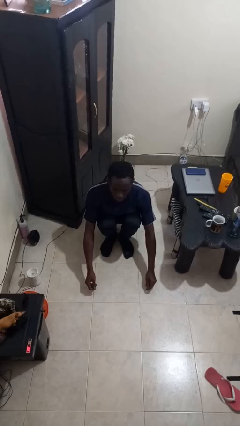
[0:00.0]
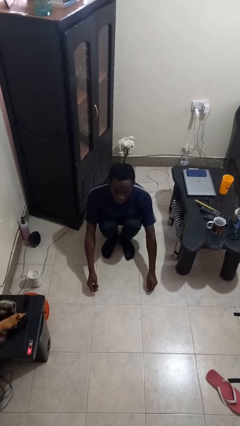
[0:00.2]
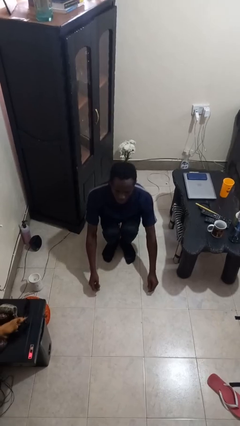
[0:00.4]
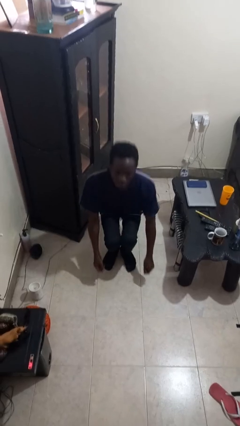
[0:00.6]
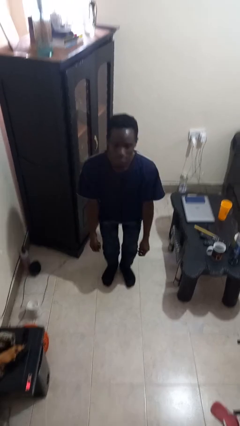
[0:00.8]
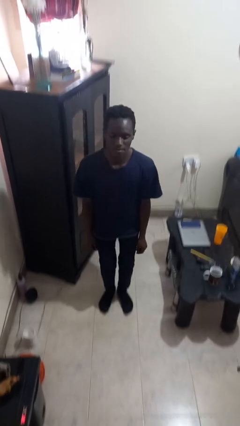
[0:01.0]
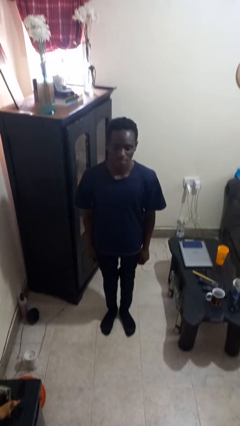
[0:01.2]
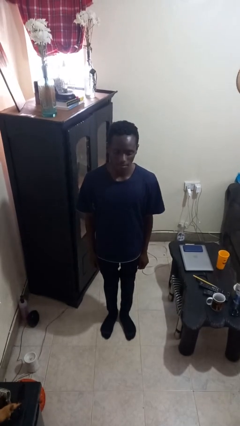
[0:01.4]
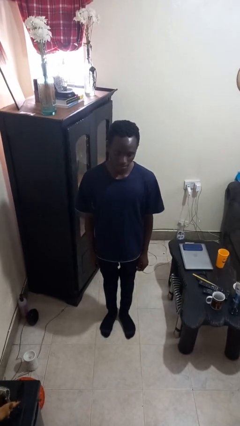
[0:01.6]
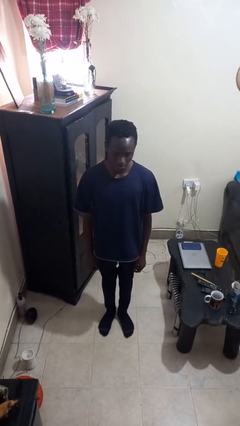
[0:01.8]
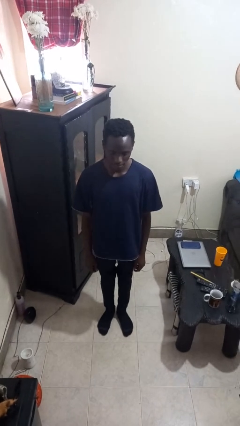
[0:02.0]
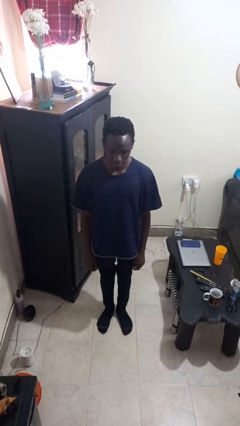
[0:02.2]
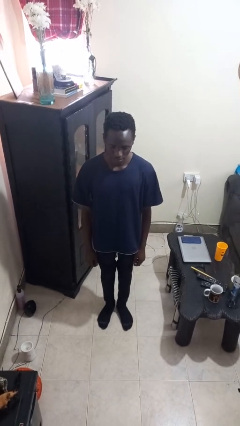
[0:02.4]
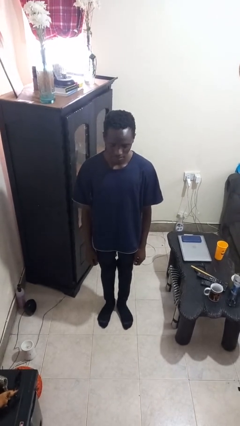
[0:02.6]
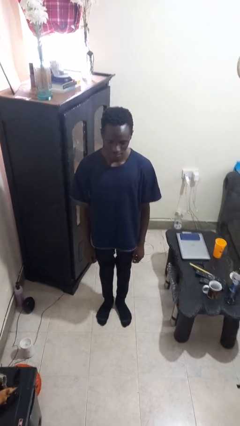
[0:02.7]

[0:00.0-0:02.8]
person stands up

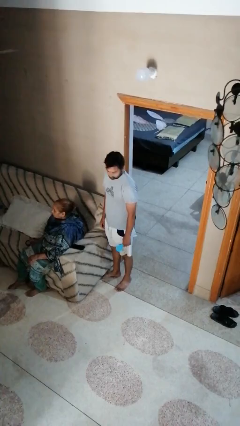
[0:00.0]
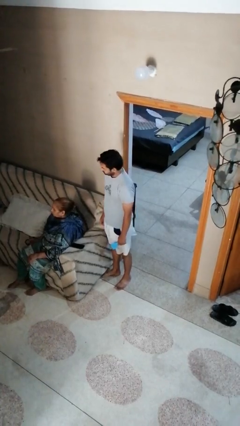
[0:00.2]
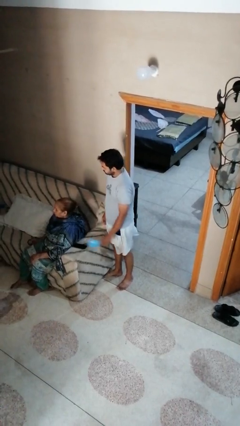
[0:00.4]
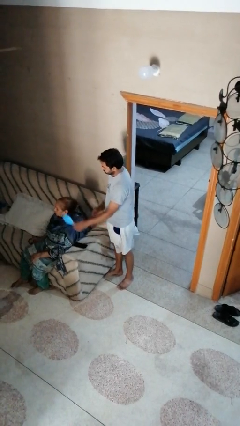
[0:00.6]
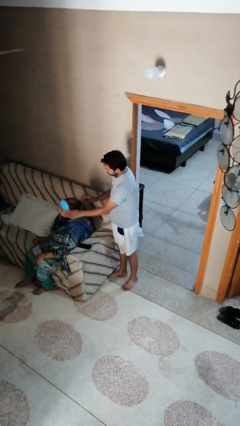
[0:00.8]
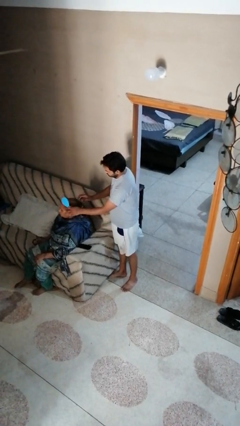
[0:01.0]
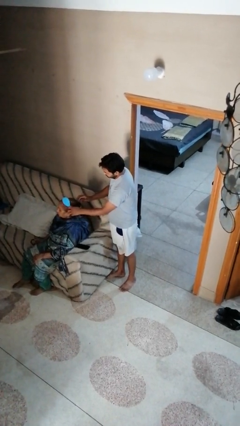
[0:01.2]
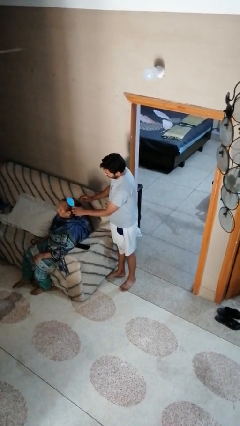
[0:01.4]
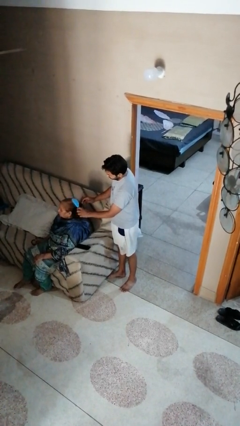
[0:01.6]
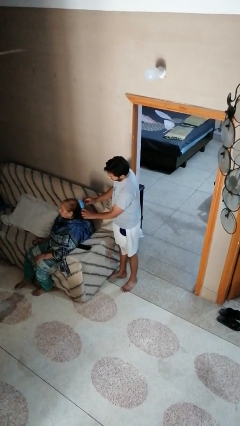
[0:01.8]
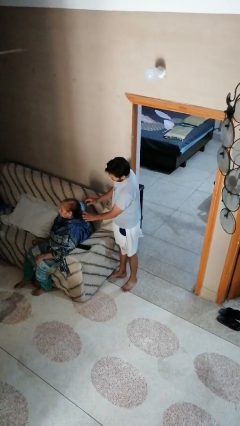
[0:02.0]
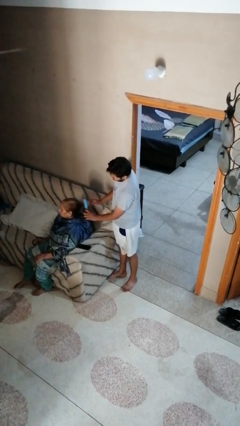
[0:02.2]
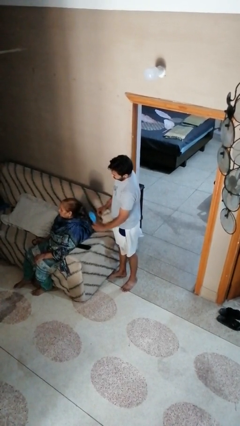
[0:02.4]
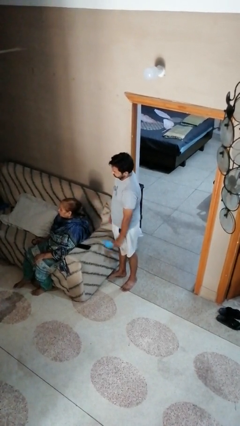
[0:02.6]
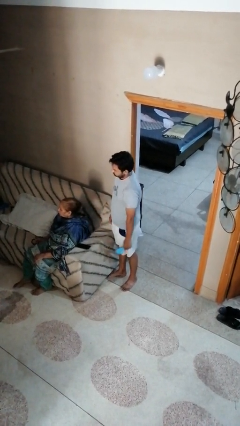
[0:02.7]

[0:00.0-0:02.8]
person brushes hair of person

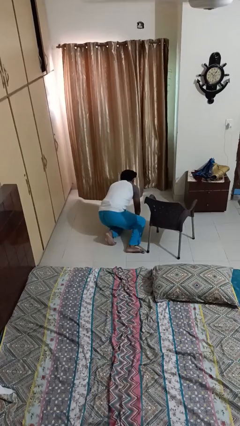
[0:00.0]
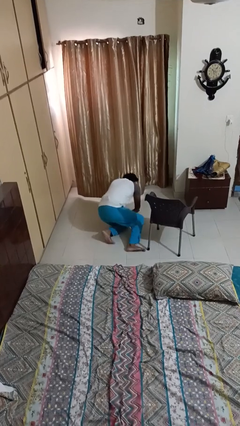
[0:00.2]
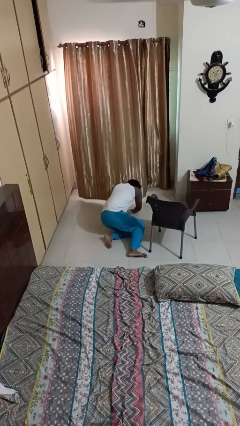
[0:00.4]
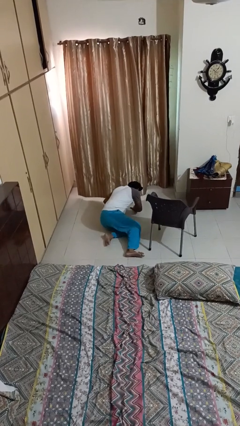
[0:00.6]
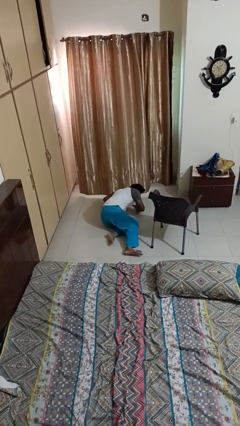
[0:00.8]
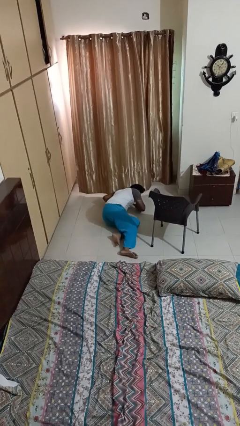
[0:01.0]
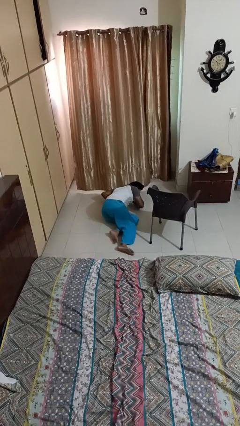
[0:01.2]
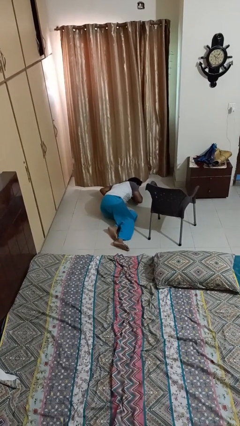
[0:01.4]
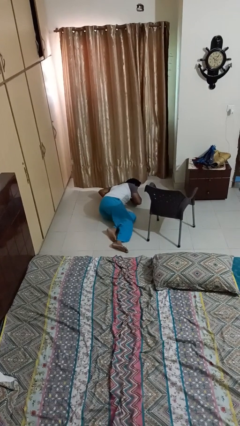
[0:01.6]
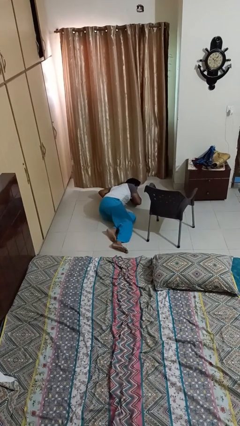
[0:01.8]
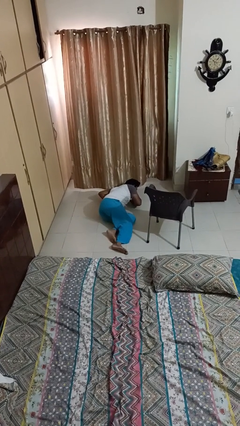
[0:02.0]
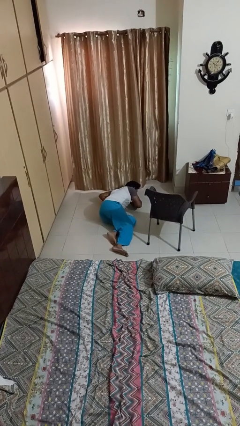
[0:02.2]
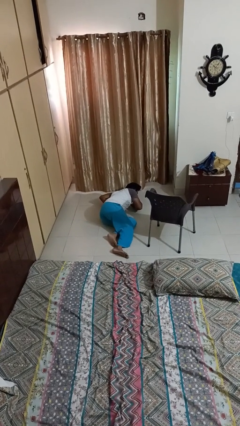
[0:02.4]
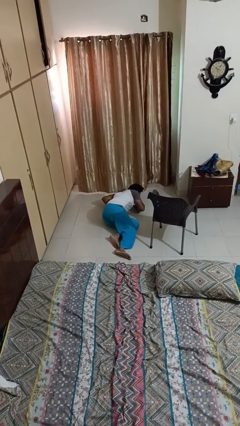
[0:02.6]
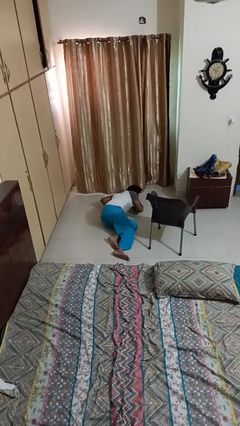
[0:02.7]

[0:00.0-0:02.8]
person lies down on floor

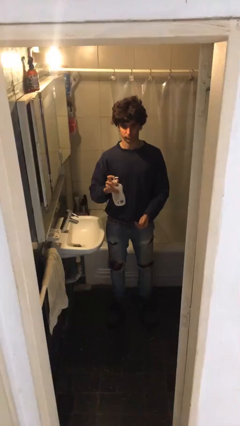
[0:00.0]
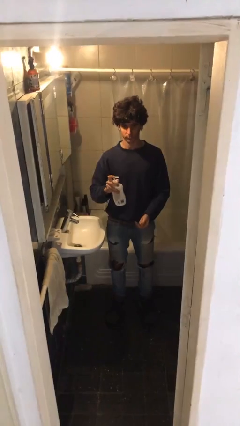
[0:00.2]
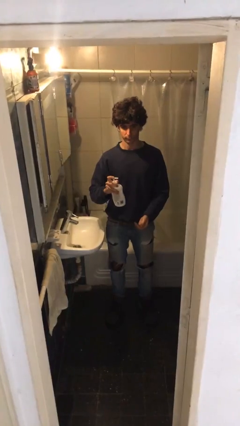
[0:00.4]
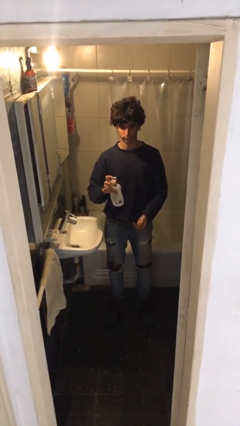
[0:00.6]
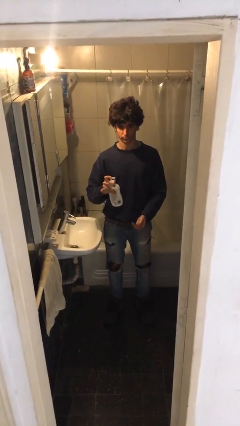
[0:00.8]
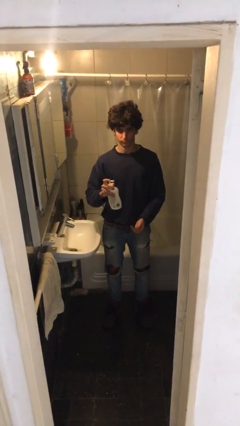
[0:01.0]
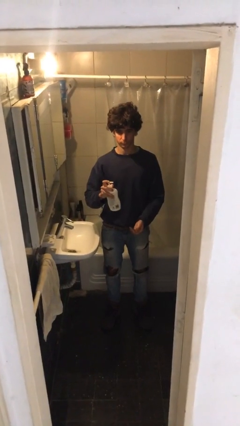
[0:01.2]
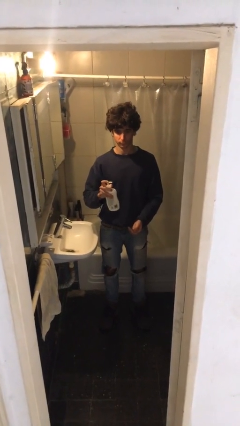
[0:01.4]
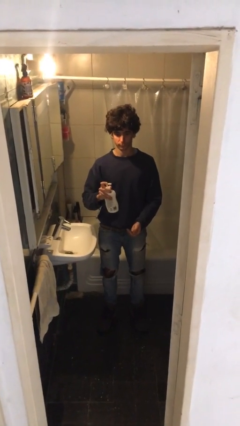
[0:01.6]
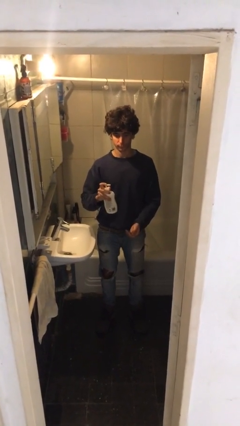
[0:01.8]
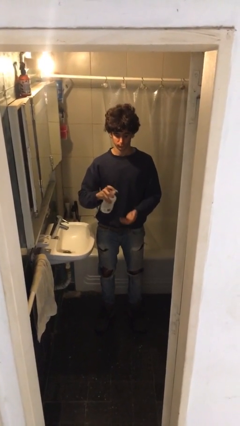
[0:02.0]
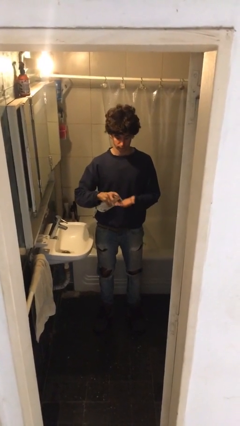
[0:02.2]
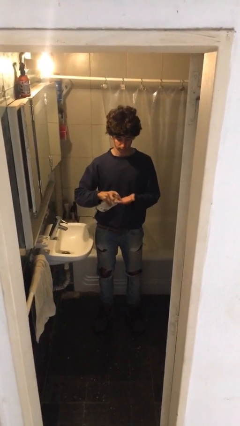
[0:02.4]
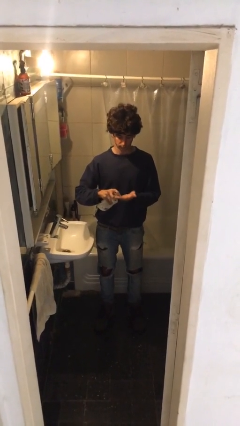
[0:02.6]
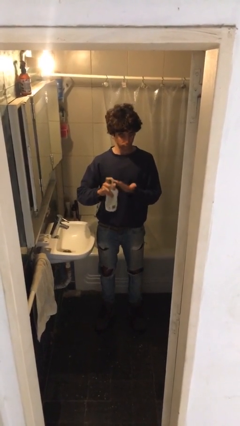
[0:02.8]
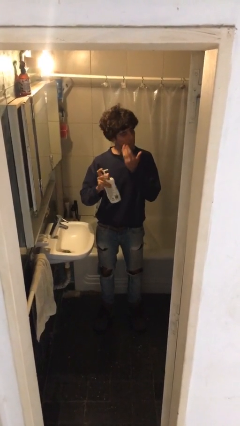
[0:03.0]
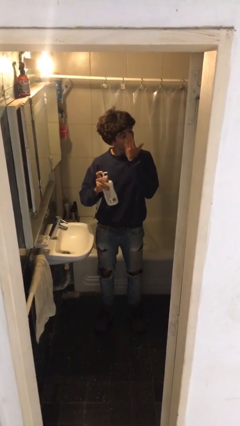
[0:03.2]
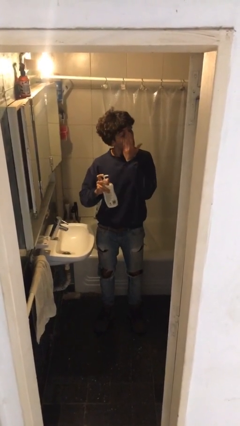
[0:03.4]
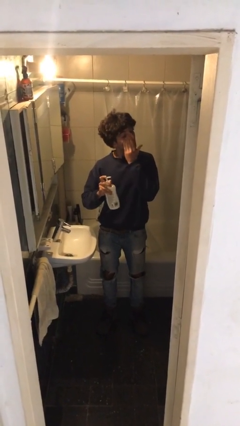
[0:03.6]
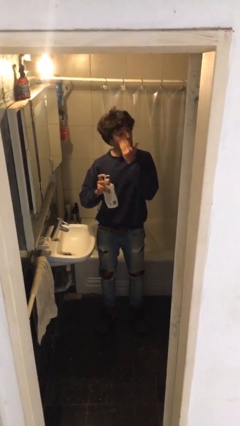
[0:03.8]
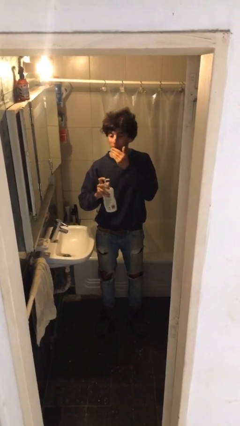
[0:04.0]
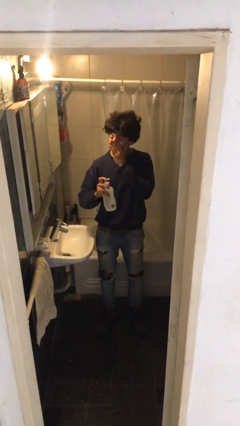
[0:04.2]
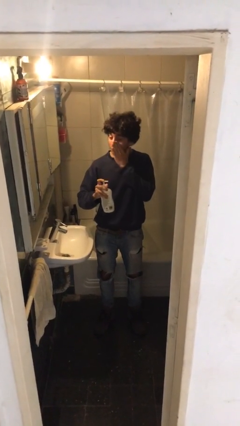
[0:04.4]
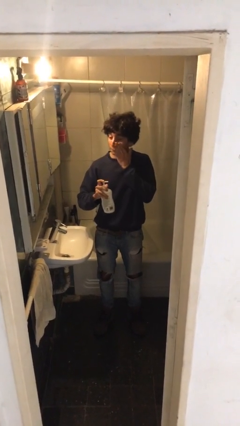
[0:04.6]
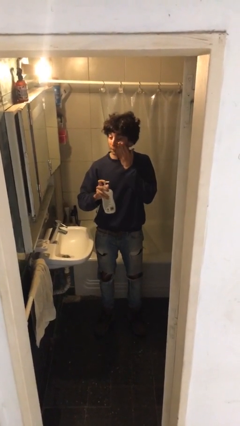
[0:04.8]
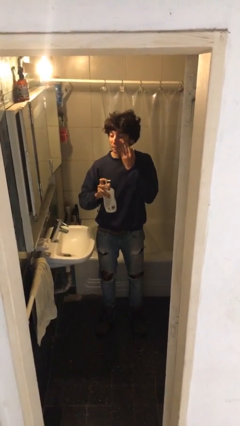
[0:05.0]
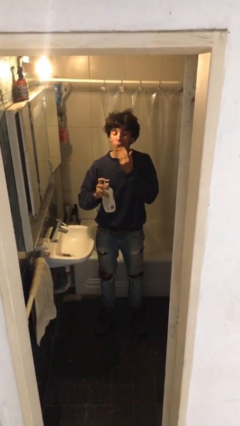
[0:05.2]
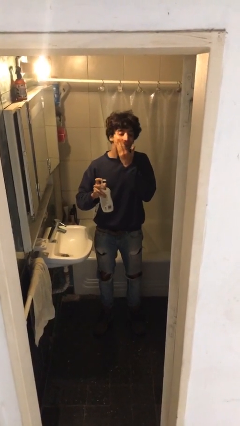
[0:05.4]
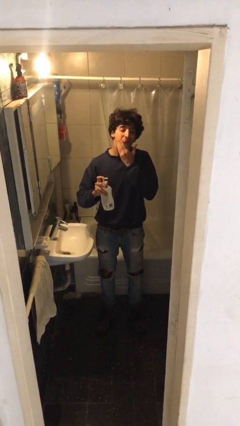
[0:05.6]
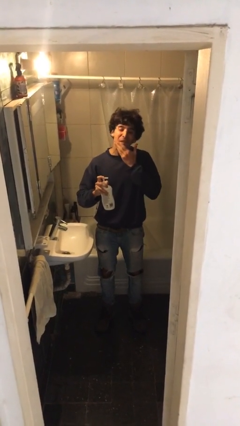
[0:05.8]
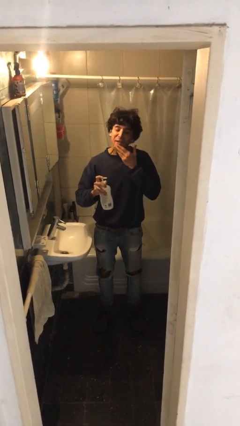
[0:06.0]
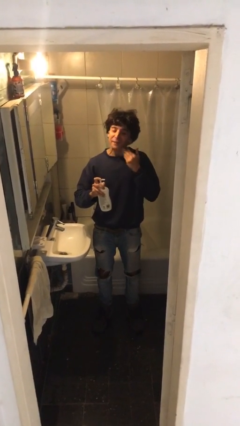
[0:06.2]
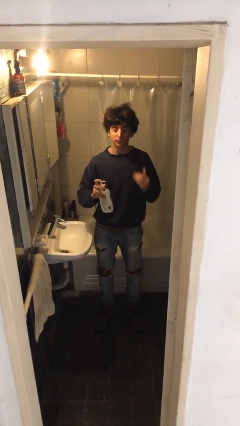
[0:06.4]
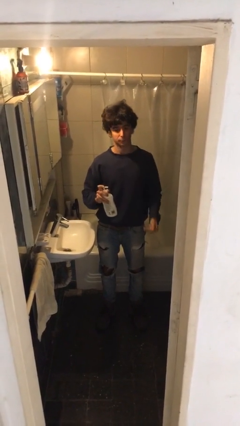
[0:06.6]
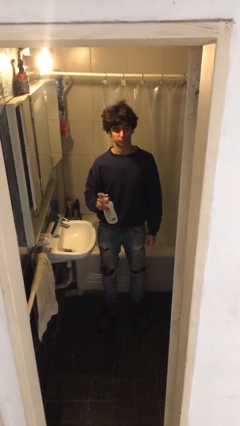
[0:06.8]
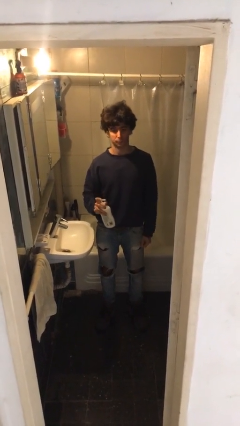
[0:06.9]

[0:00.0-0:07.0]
person applies facial moisturizer

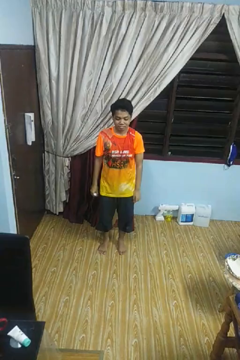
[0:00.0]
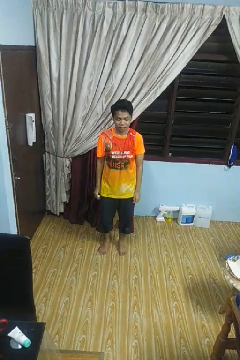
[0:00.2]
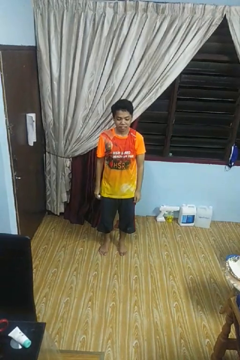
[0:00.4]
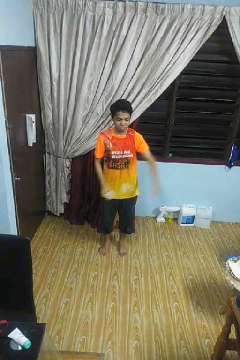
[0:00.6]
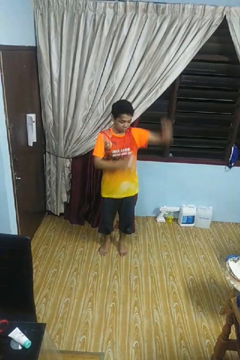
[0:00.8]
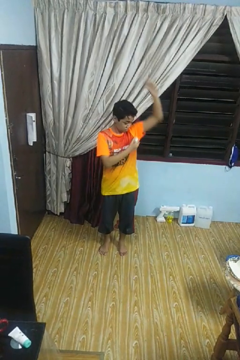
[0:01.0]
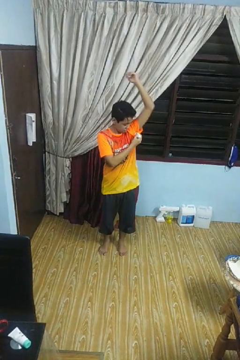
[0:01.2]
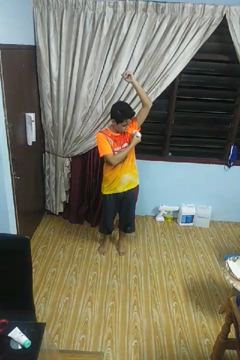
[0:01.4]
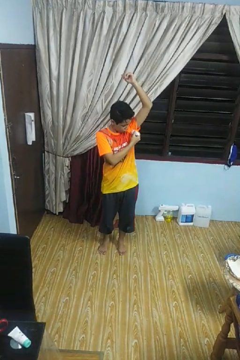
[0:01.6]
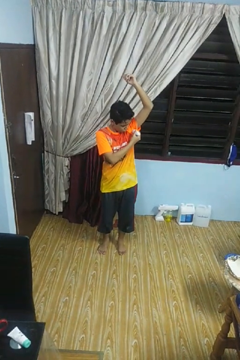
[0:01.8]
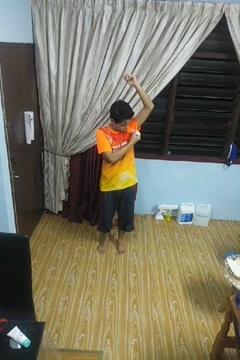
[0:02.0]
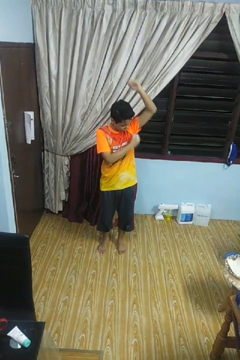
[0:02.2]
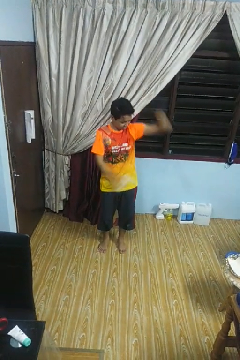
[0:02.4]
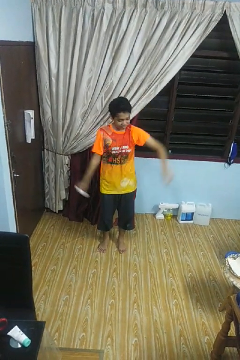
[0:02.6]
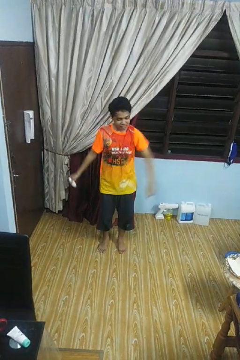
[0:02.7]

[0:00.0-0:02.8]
person applies deodorant

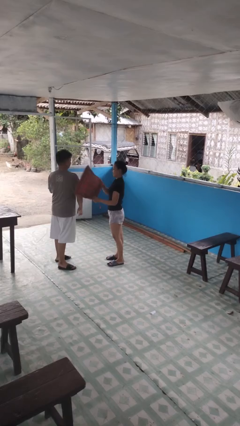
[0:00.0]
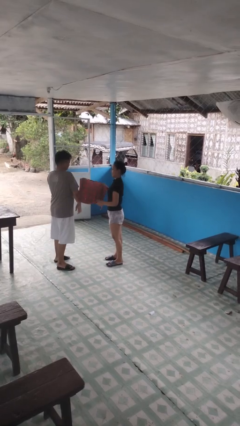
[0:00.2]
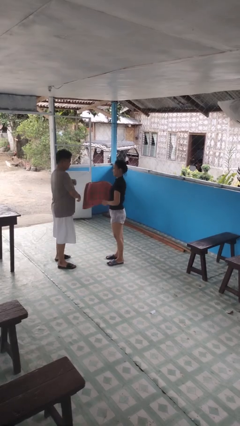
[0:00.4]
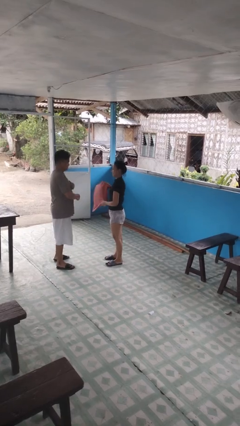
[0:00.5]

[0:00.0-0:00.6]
person hits person with pillow
